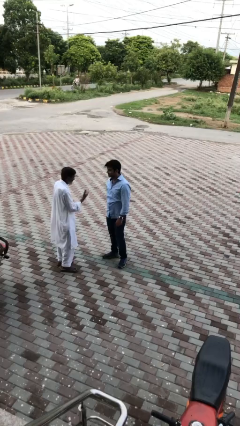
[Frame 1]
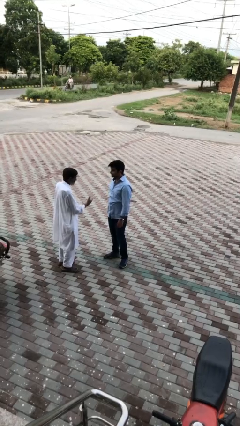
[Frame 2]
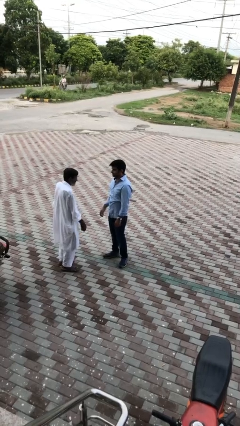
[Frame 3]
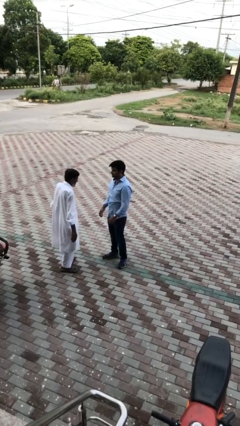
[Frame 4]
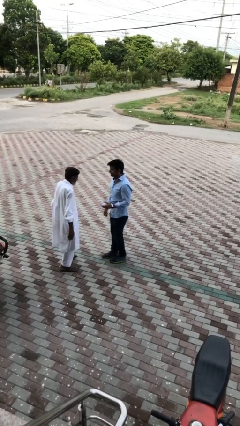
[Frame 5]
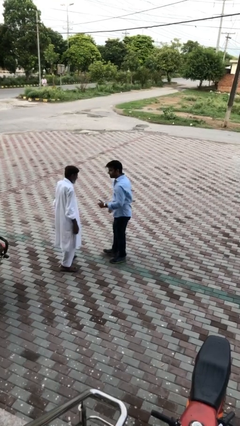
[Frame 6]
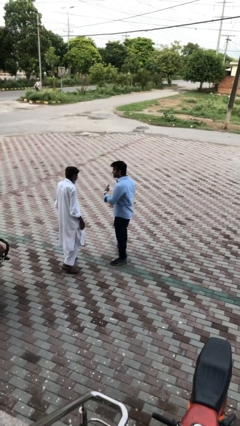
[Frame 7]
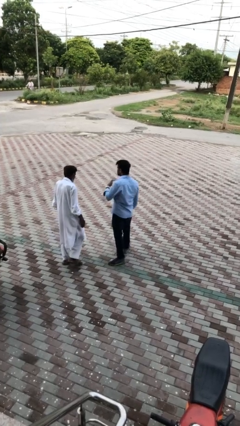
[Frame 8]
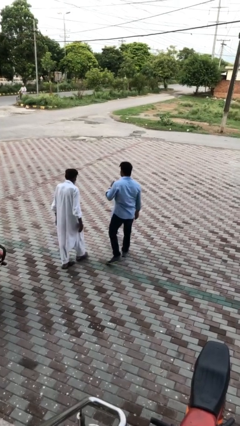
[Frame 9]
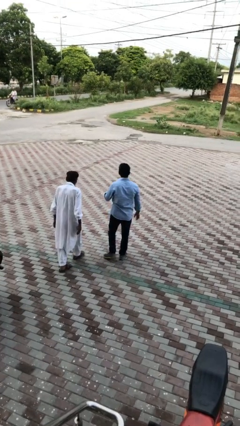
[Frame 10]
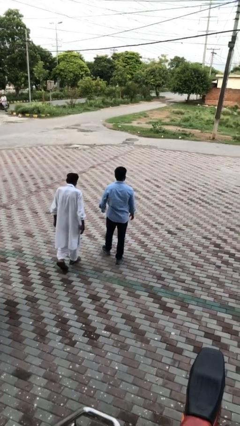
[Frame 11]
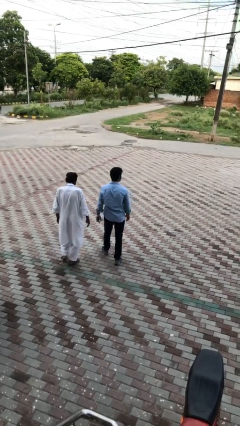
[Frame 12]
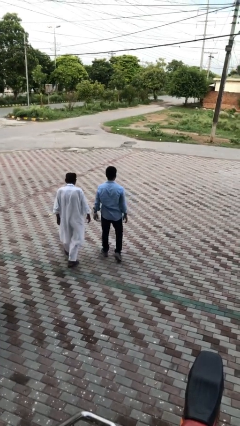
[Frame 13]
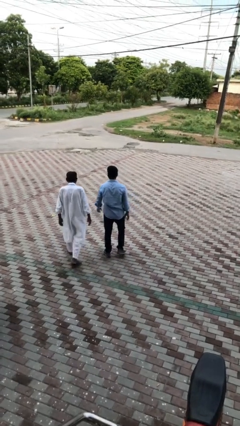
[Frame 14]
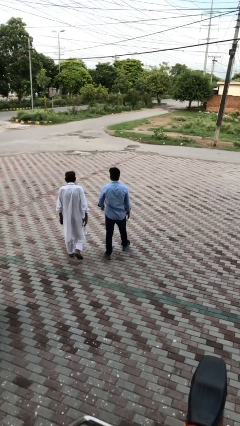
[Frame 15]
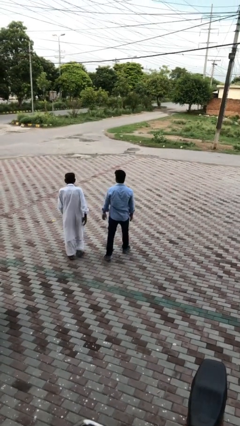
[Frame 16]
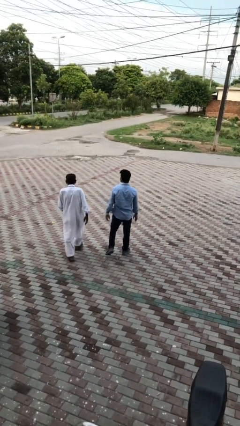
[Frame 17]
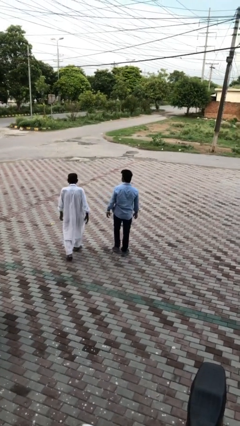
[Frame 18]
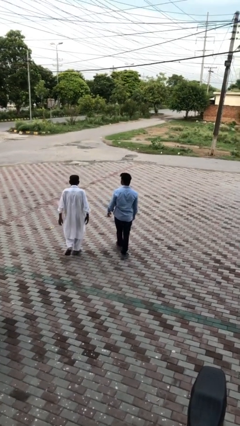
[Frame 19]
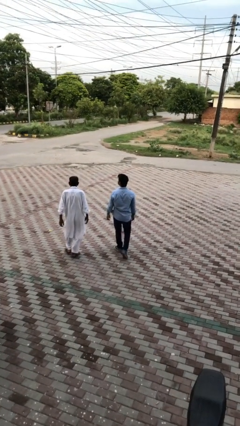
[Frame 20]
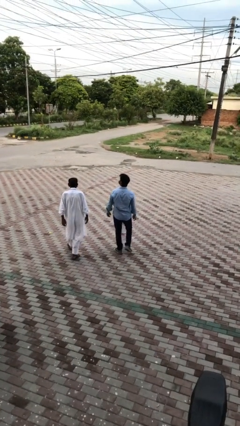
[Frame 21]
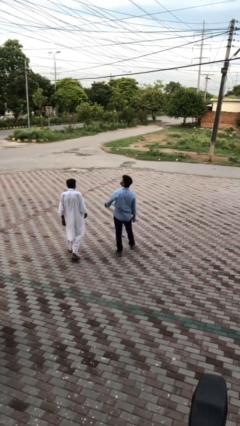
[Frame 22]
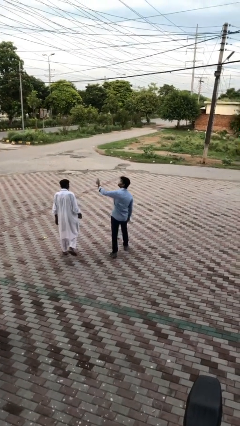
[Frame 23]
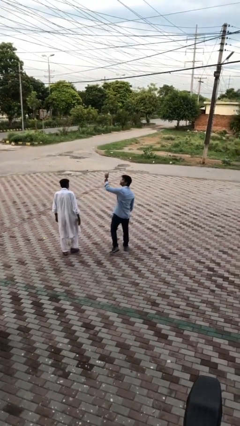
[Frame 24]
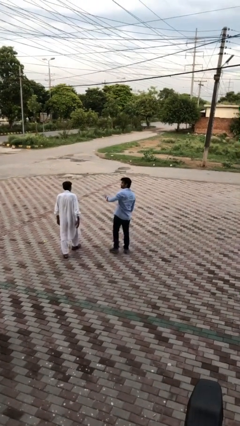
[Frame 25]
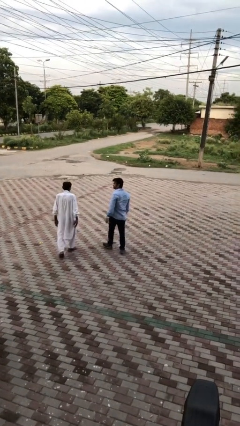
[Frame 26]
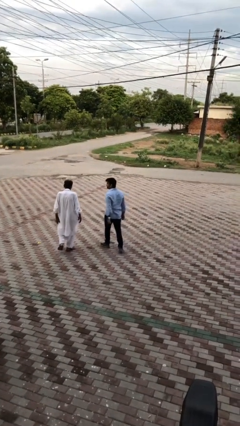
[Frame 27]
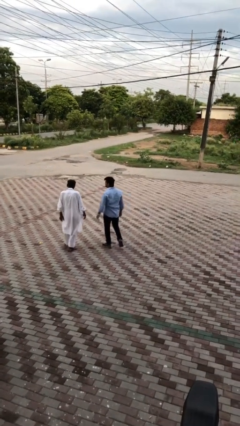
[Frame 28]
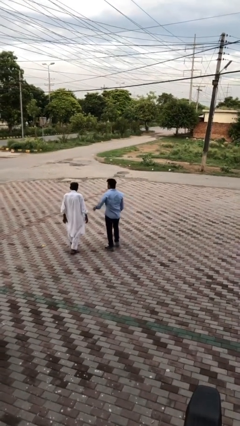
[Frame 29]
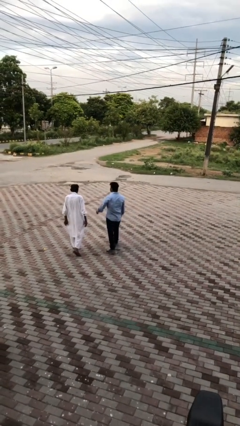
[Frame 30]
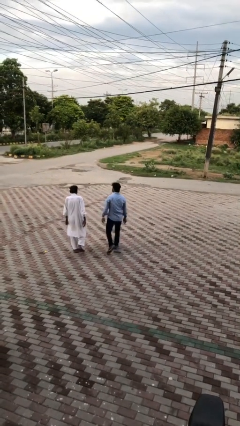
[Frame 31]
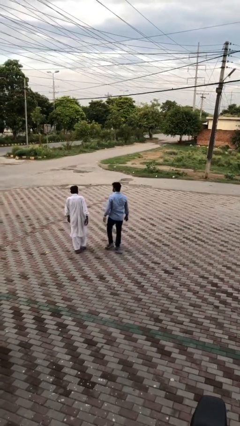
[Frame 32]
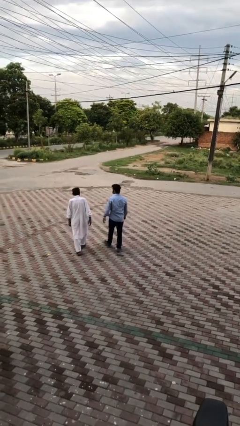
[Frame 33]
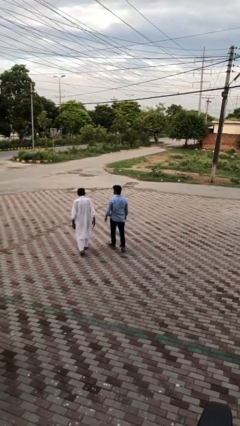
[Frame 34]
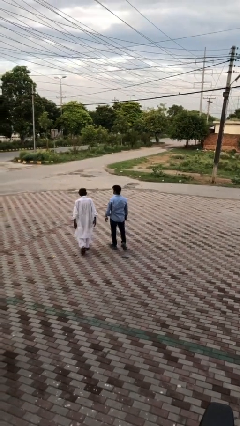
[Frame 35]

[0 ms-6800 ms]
person talks to person

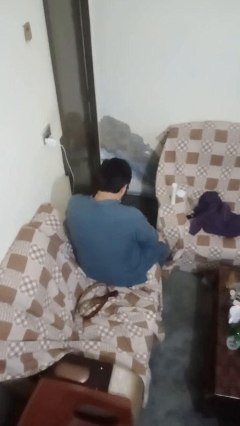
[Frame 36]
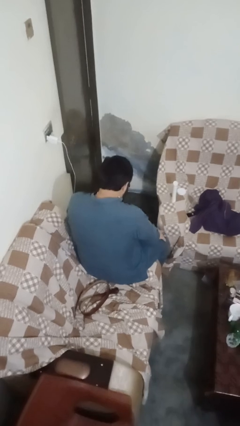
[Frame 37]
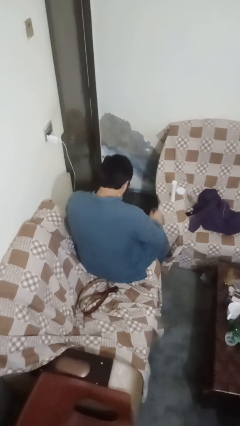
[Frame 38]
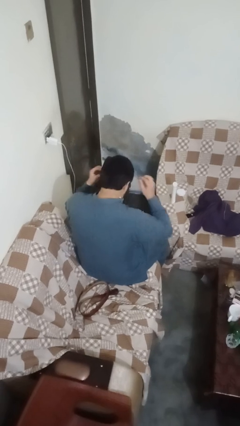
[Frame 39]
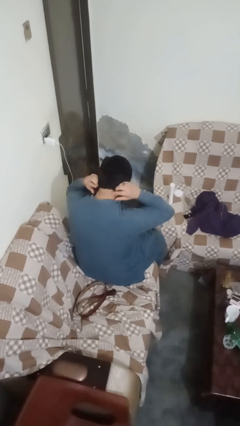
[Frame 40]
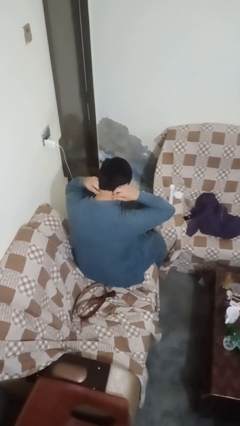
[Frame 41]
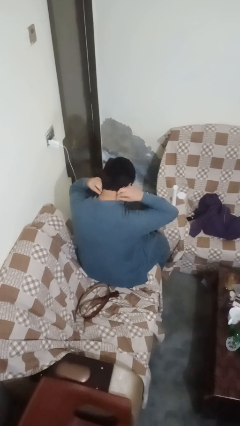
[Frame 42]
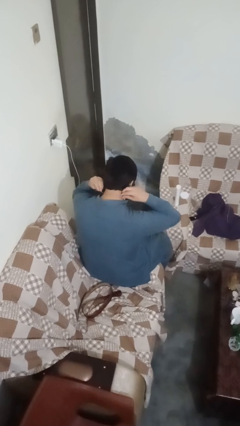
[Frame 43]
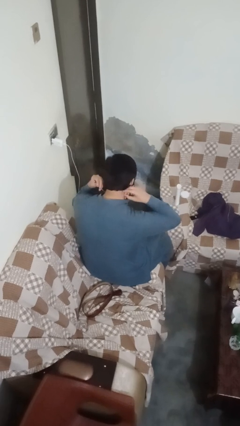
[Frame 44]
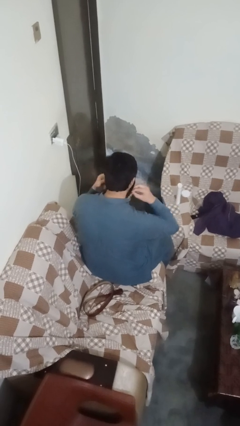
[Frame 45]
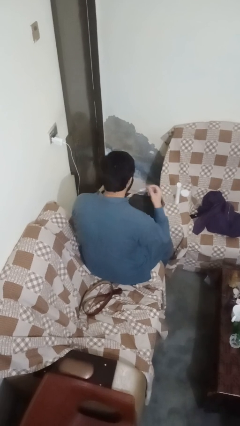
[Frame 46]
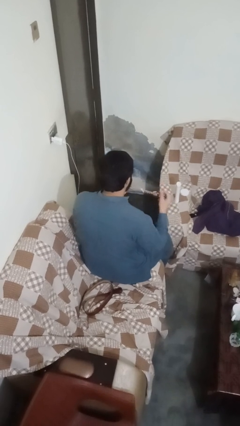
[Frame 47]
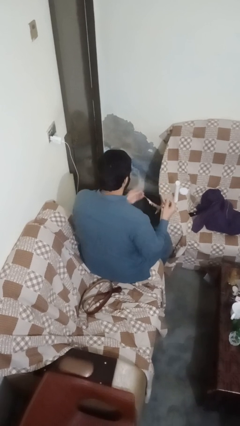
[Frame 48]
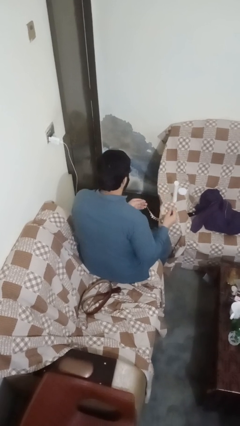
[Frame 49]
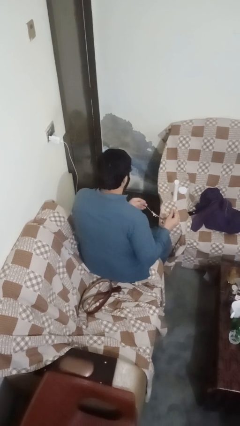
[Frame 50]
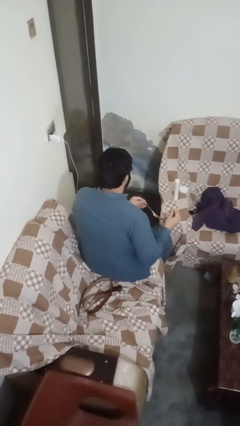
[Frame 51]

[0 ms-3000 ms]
person takes off necklace

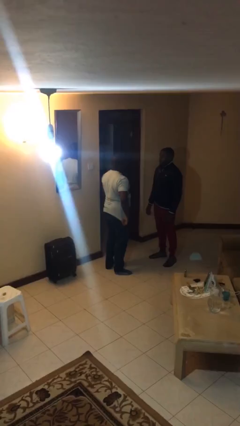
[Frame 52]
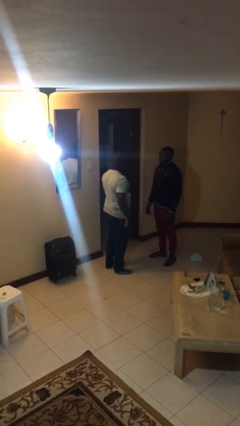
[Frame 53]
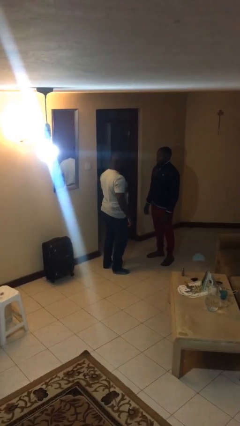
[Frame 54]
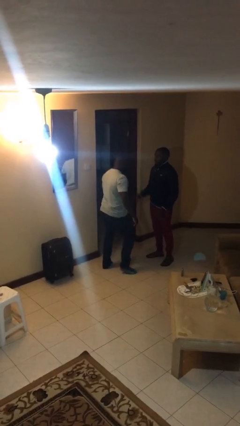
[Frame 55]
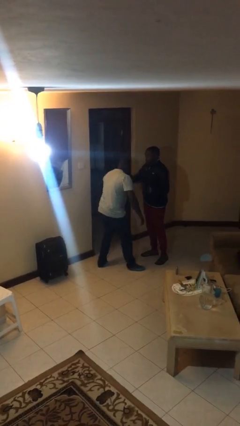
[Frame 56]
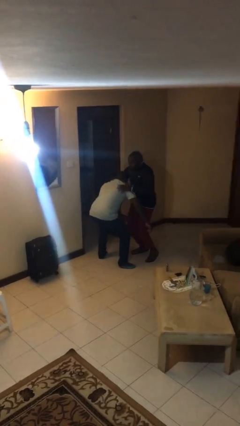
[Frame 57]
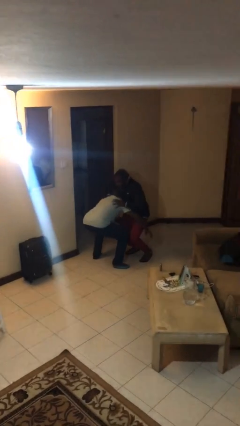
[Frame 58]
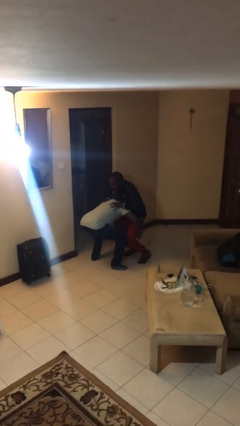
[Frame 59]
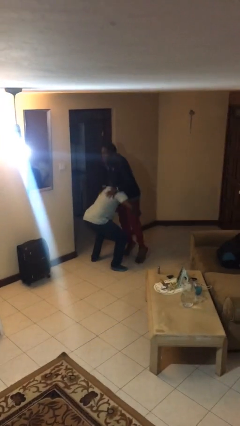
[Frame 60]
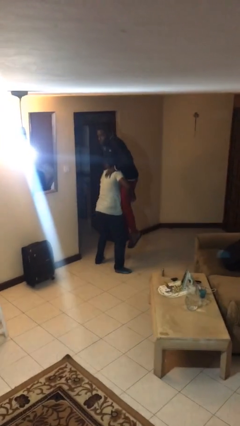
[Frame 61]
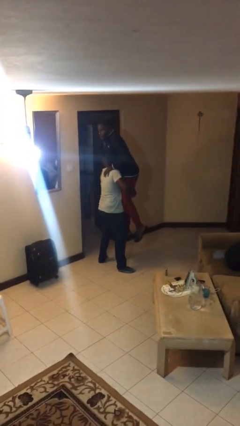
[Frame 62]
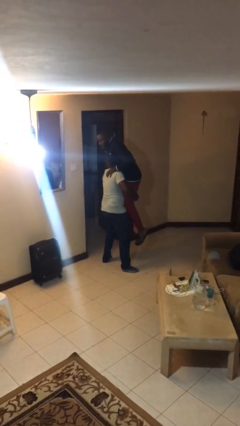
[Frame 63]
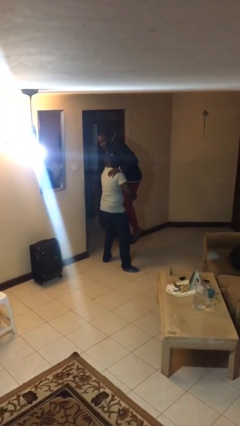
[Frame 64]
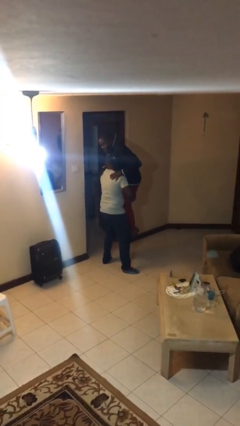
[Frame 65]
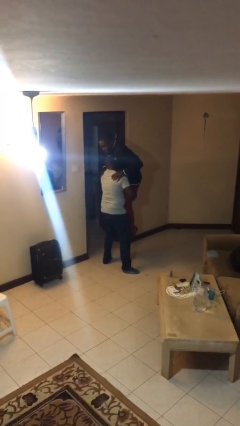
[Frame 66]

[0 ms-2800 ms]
person picks up person

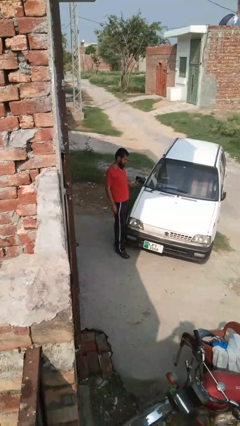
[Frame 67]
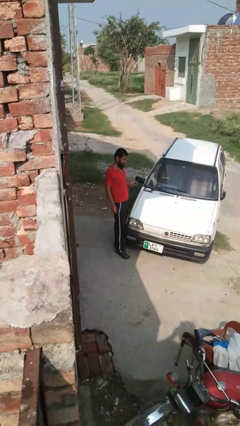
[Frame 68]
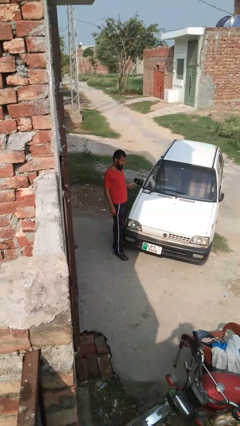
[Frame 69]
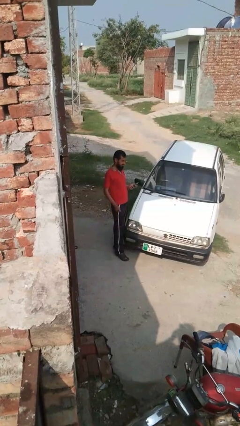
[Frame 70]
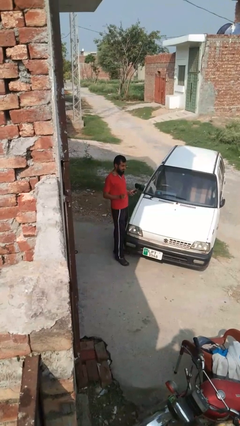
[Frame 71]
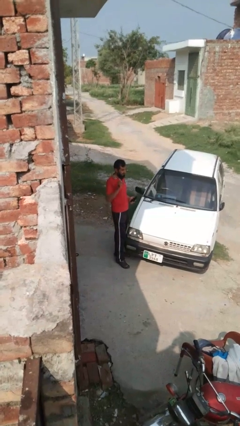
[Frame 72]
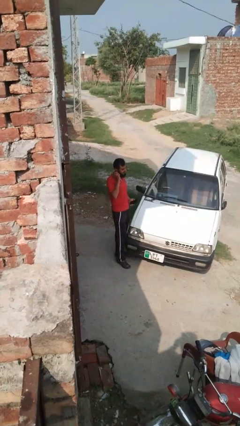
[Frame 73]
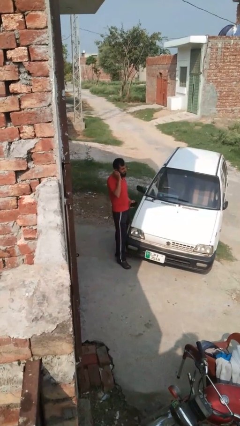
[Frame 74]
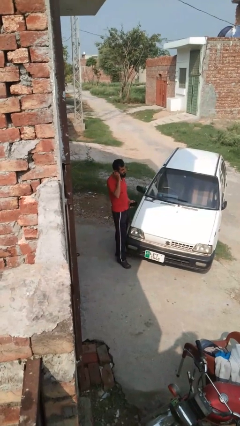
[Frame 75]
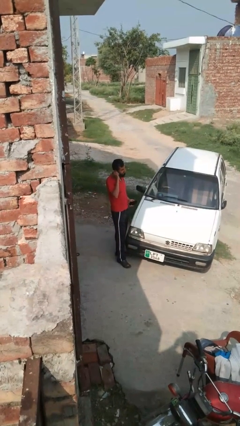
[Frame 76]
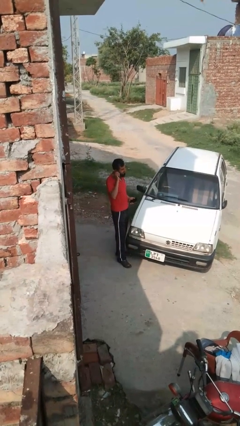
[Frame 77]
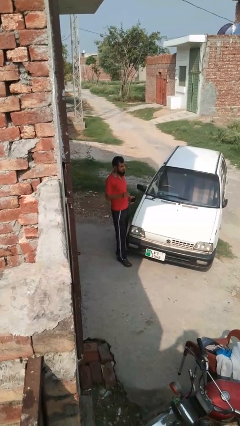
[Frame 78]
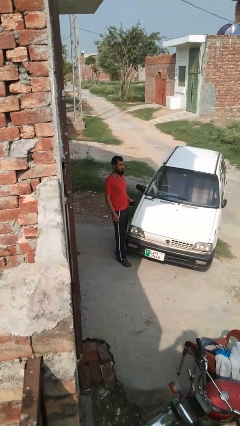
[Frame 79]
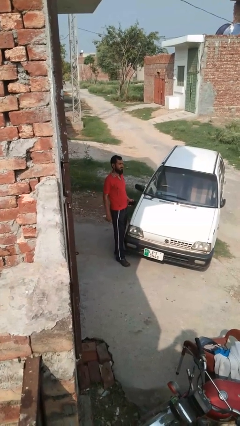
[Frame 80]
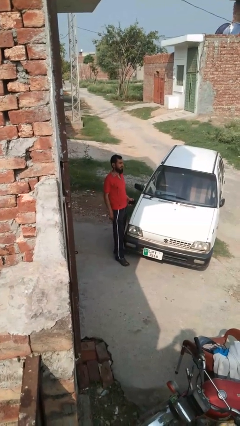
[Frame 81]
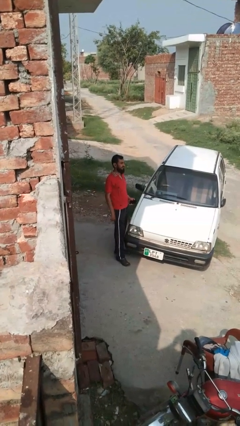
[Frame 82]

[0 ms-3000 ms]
person puts on headphones

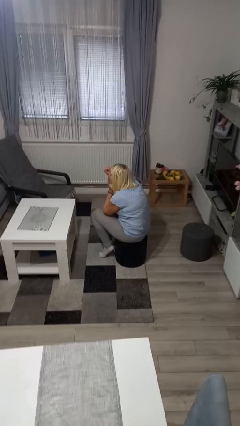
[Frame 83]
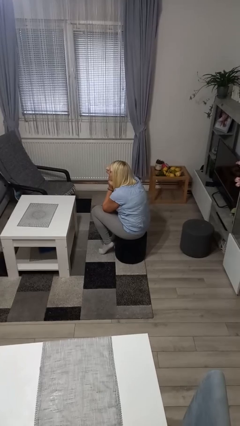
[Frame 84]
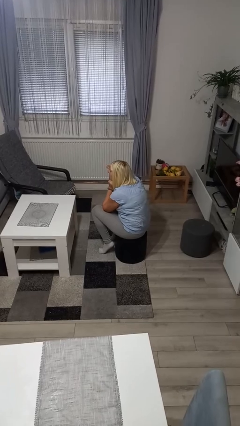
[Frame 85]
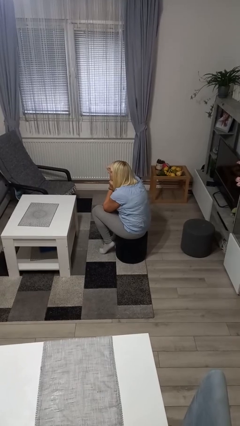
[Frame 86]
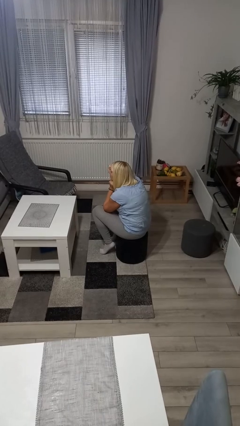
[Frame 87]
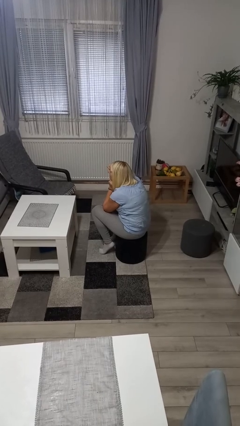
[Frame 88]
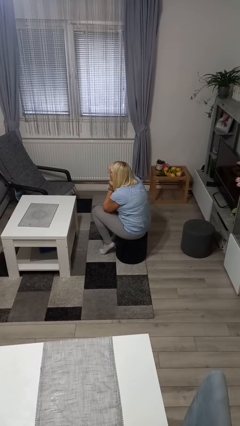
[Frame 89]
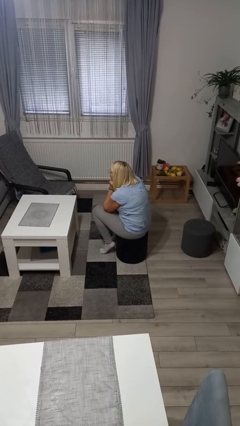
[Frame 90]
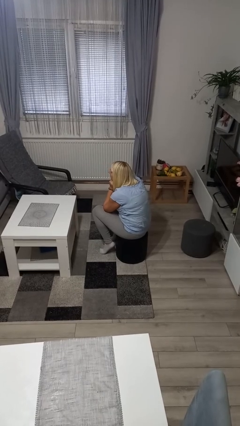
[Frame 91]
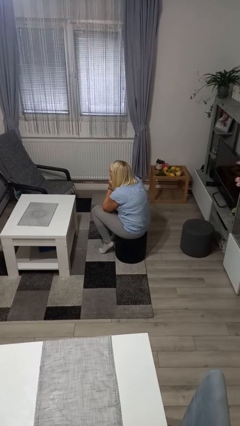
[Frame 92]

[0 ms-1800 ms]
person rubs eyes

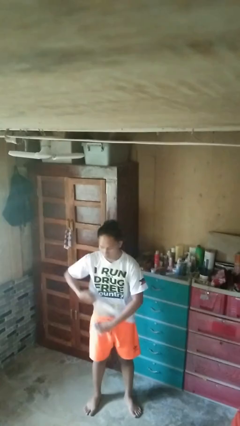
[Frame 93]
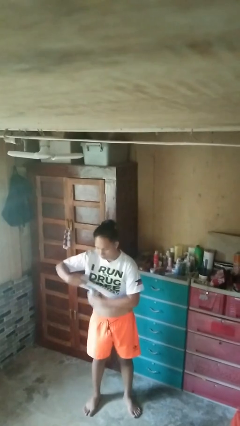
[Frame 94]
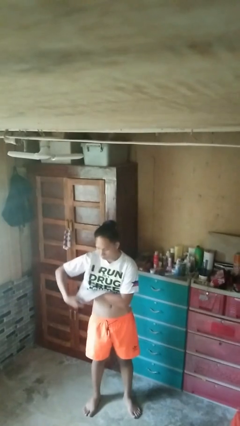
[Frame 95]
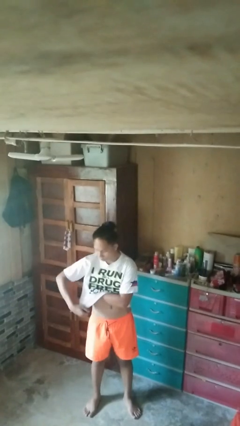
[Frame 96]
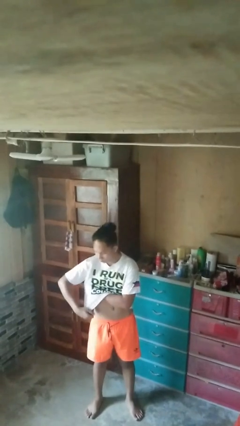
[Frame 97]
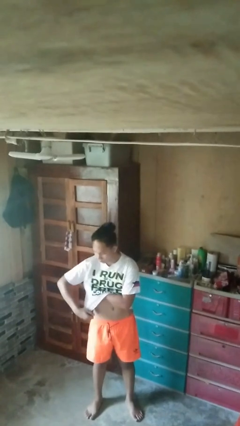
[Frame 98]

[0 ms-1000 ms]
person applies deodorant
